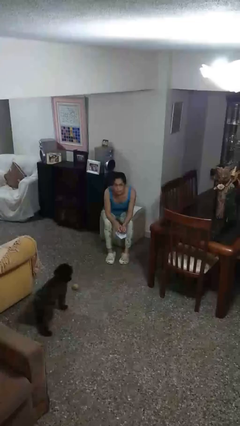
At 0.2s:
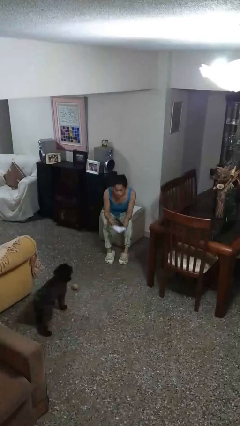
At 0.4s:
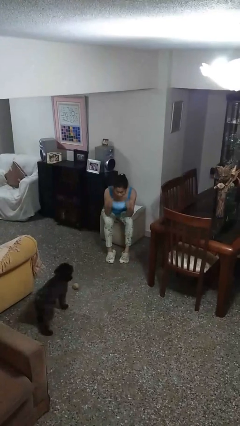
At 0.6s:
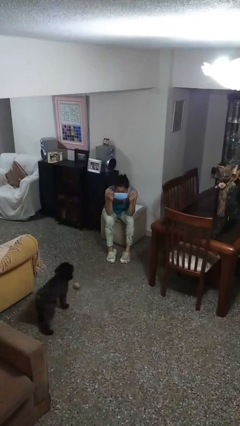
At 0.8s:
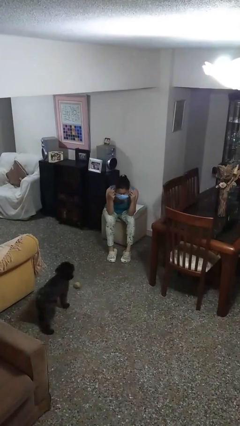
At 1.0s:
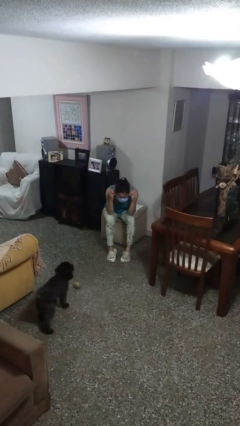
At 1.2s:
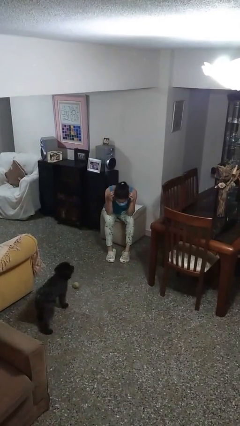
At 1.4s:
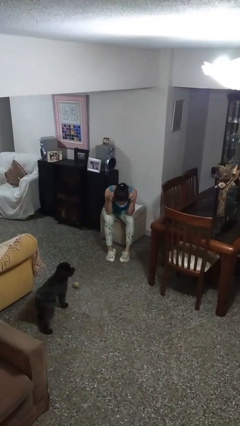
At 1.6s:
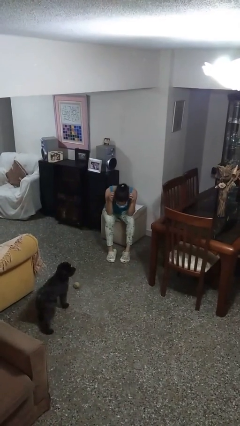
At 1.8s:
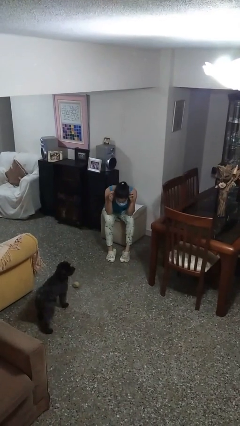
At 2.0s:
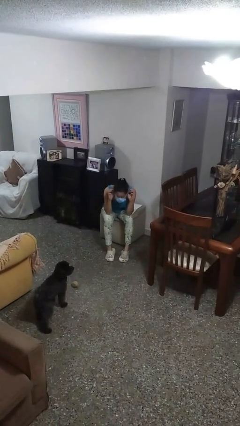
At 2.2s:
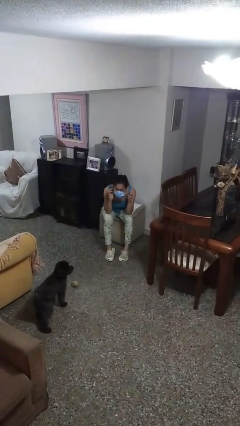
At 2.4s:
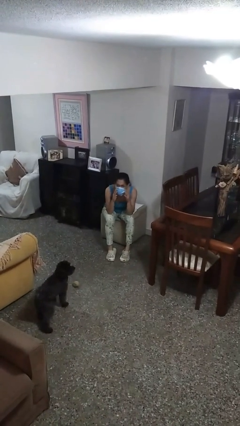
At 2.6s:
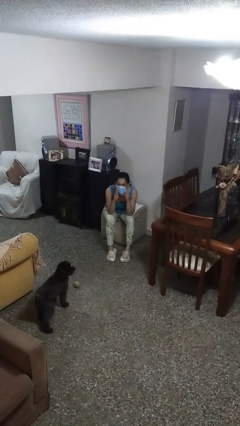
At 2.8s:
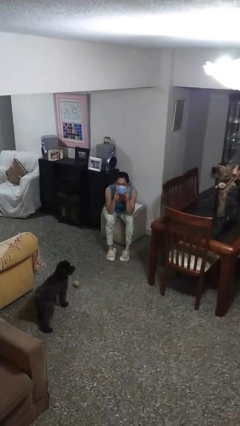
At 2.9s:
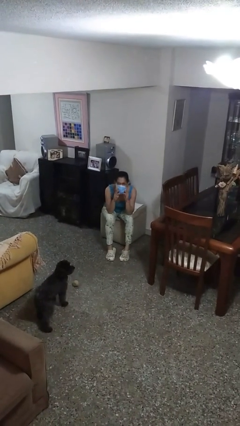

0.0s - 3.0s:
person puts on facemask

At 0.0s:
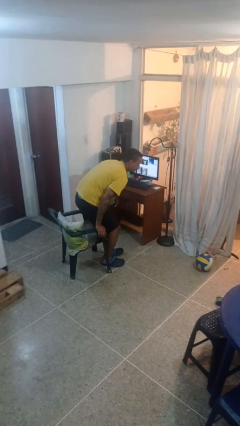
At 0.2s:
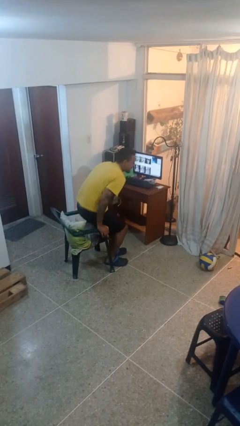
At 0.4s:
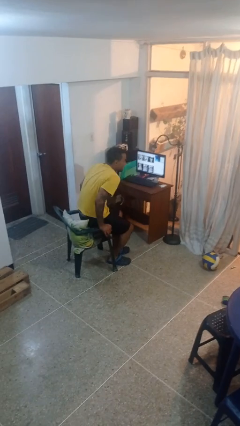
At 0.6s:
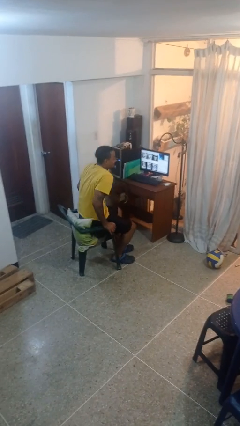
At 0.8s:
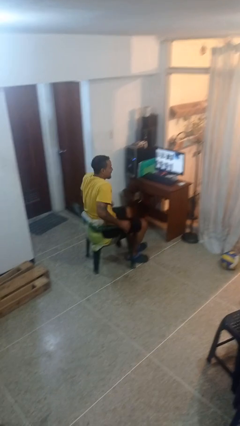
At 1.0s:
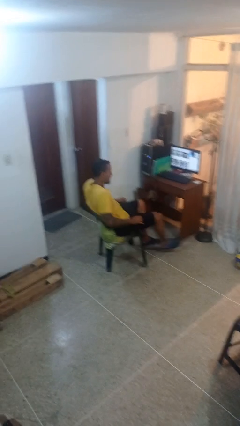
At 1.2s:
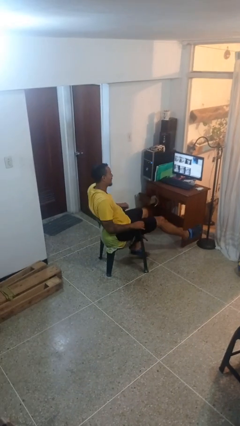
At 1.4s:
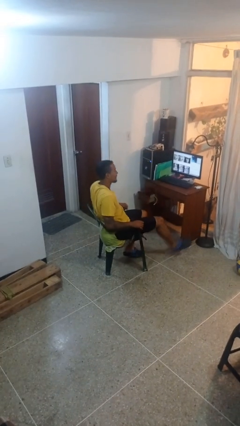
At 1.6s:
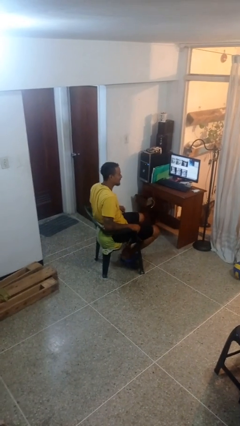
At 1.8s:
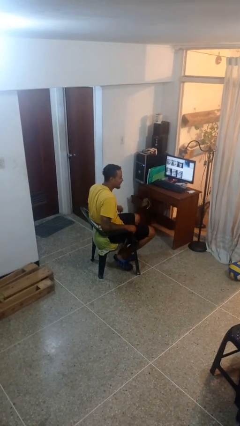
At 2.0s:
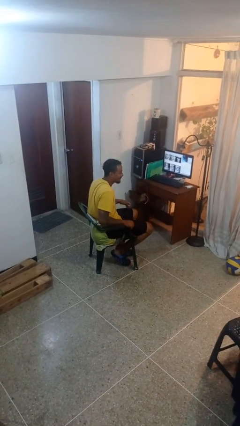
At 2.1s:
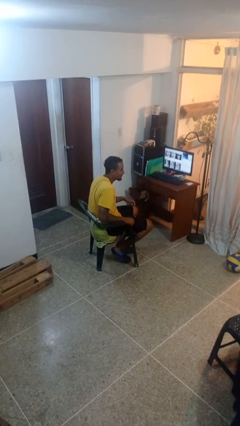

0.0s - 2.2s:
person sits down

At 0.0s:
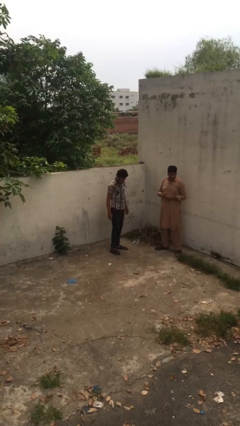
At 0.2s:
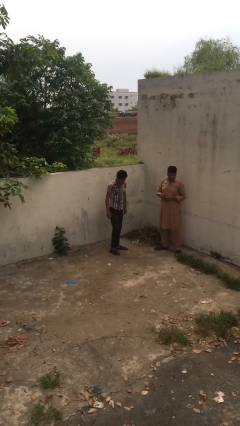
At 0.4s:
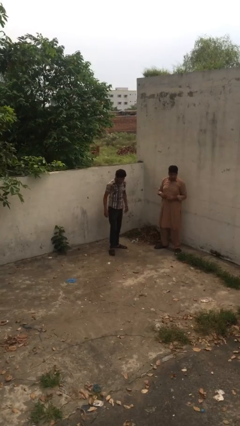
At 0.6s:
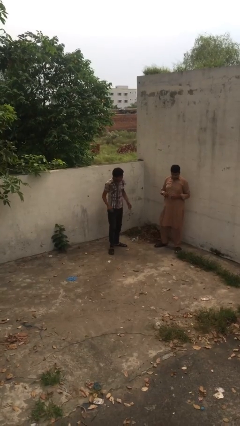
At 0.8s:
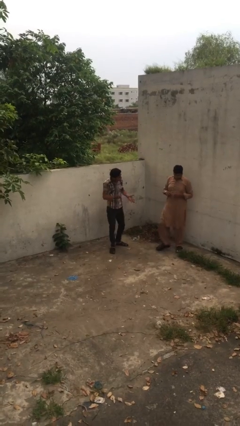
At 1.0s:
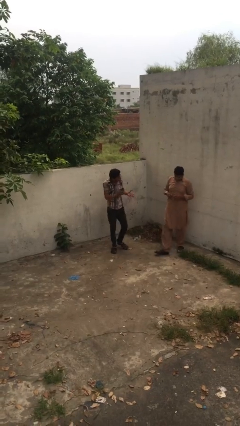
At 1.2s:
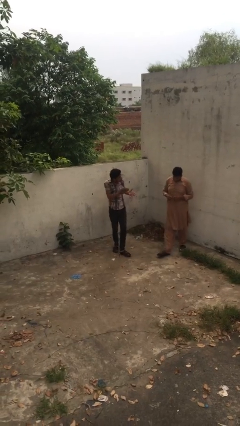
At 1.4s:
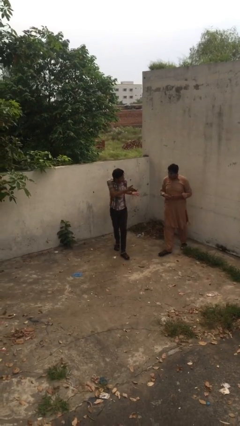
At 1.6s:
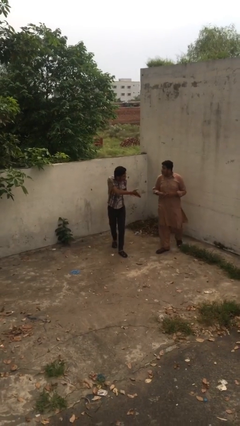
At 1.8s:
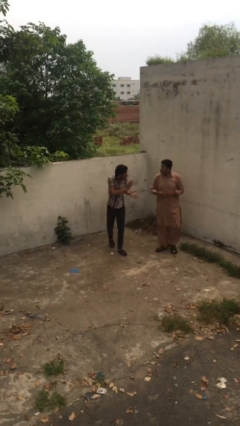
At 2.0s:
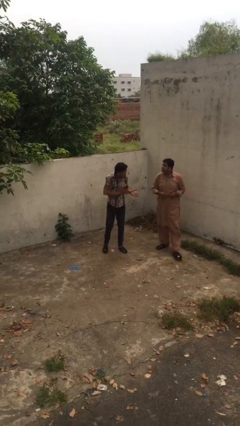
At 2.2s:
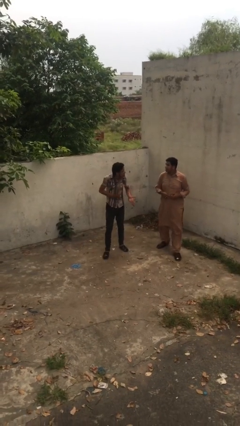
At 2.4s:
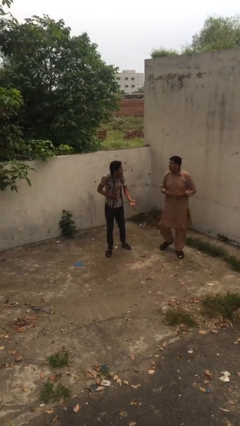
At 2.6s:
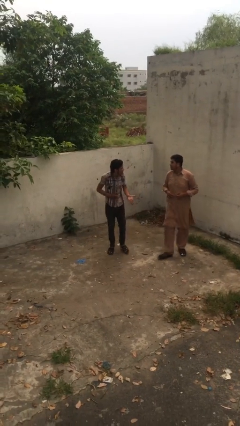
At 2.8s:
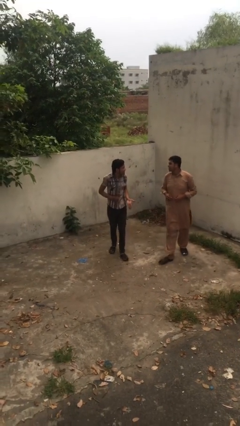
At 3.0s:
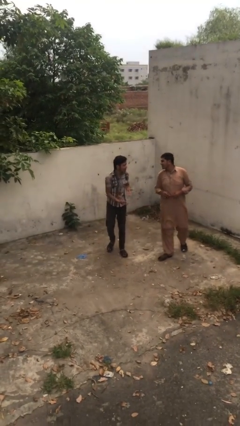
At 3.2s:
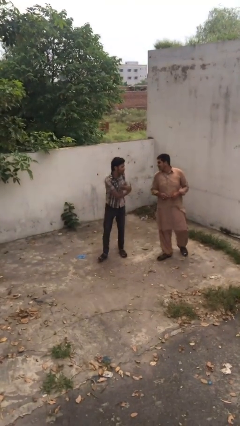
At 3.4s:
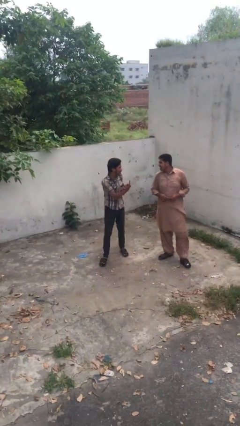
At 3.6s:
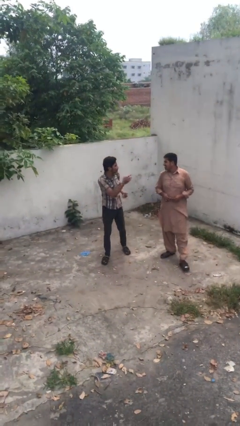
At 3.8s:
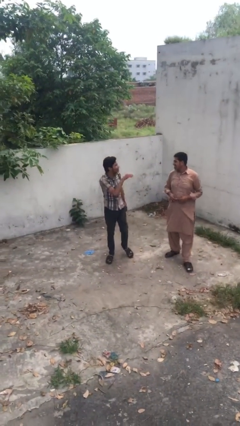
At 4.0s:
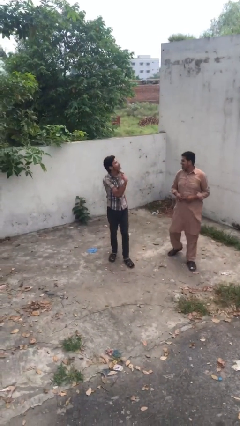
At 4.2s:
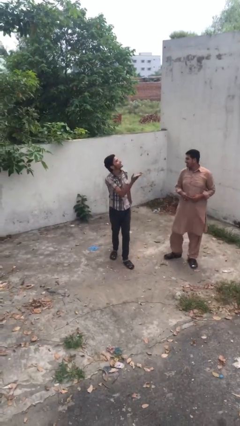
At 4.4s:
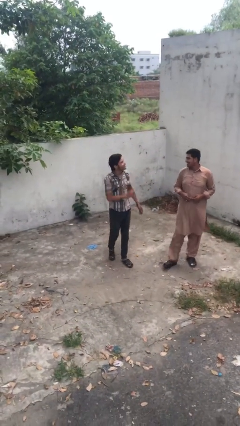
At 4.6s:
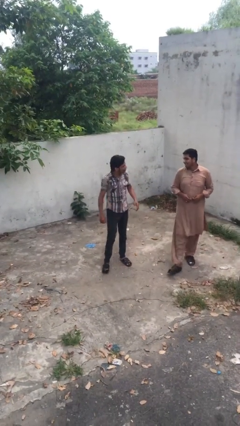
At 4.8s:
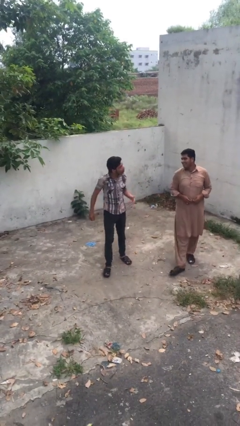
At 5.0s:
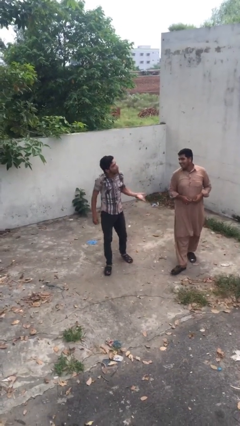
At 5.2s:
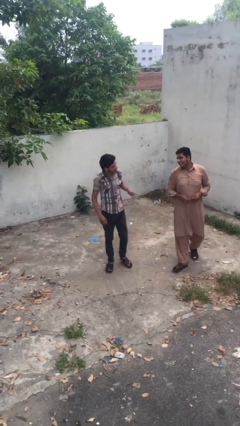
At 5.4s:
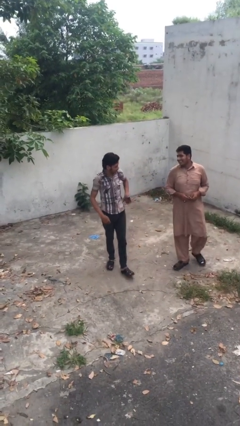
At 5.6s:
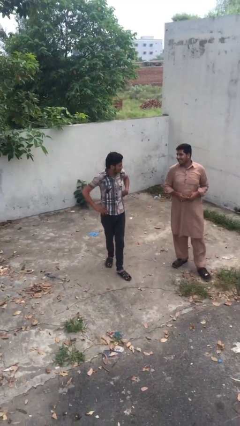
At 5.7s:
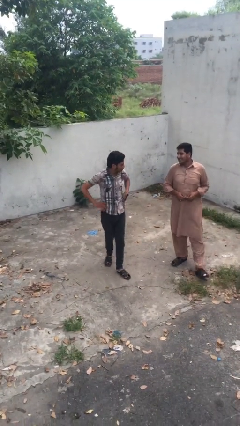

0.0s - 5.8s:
person talks to person

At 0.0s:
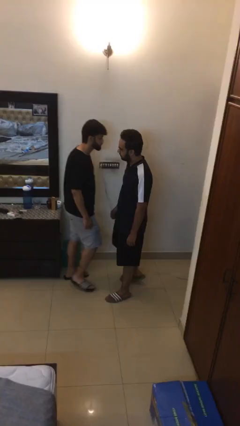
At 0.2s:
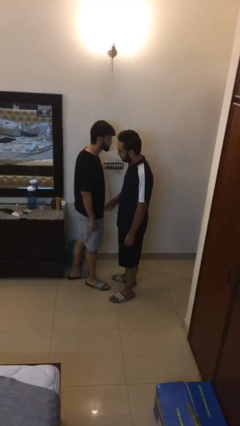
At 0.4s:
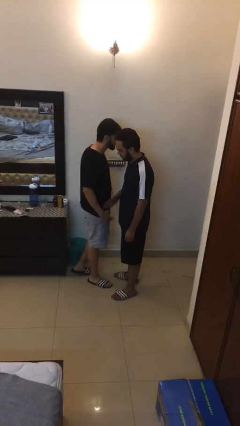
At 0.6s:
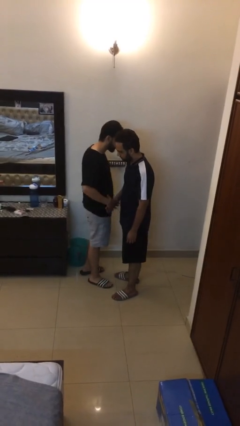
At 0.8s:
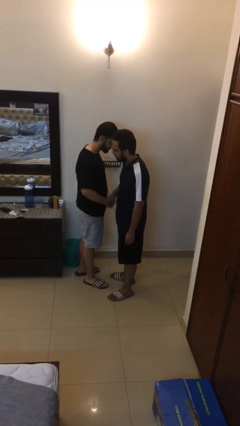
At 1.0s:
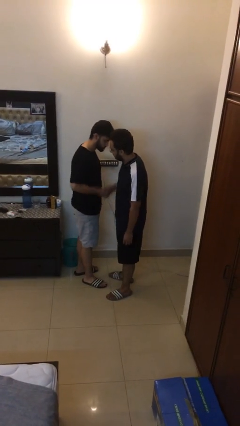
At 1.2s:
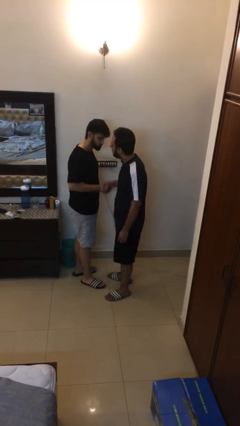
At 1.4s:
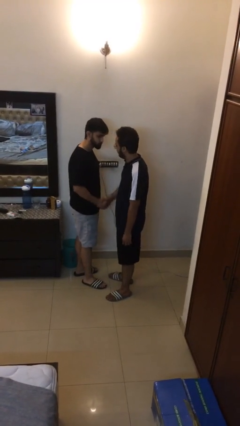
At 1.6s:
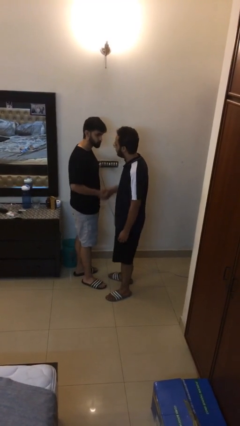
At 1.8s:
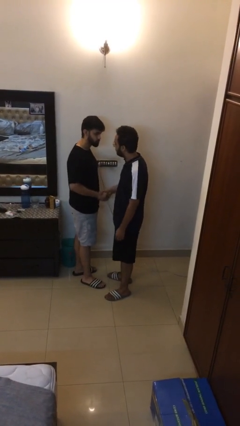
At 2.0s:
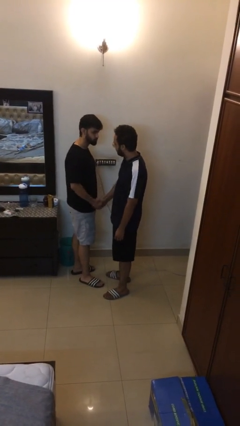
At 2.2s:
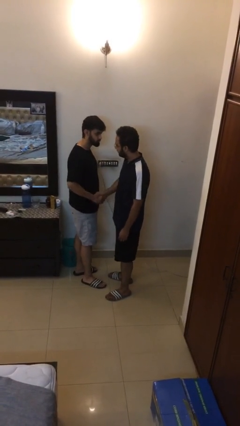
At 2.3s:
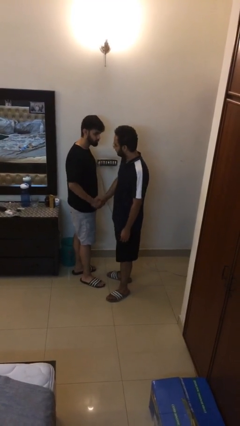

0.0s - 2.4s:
person shakes hand

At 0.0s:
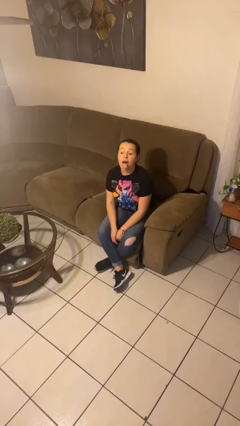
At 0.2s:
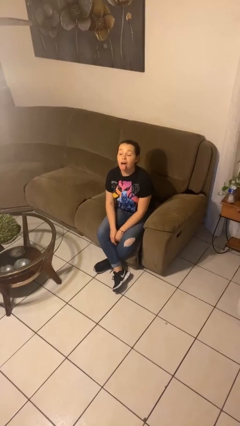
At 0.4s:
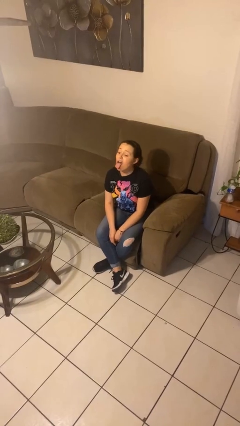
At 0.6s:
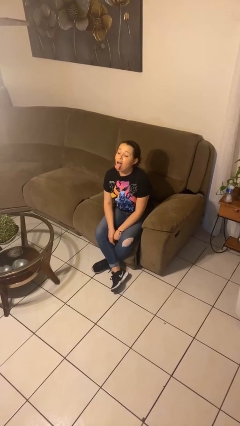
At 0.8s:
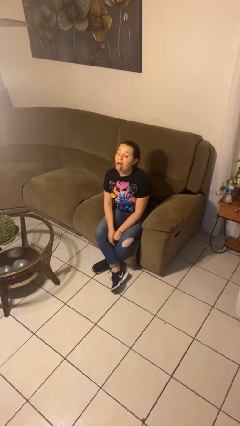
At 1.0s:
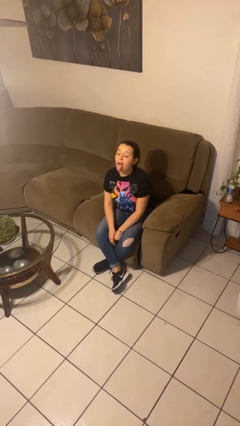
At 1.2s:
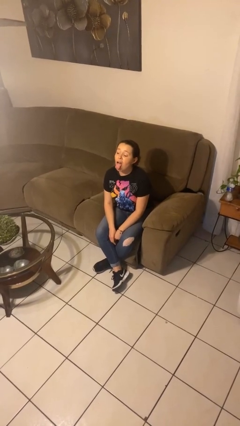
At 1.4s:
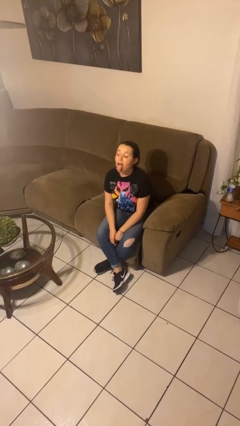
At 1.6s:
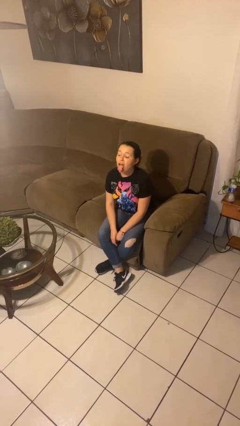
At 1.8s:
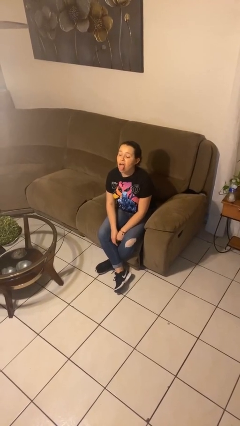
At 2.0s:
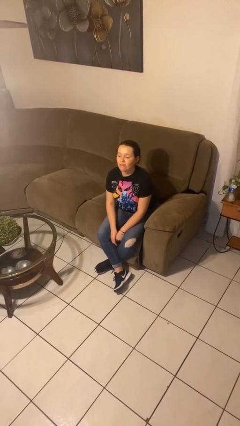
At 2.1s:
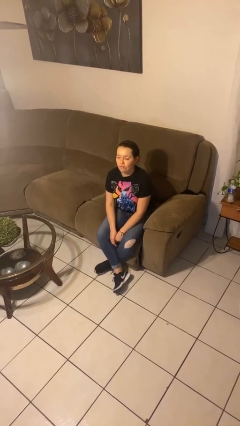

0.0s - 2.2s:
person sticks out tongue

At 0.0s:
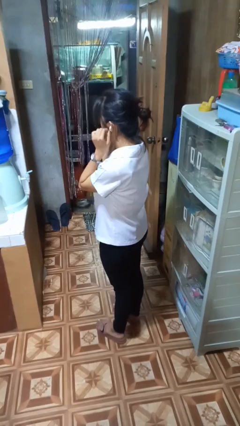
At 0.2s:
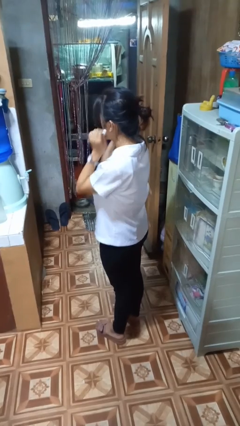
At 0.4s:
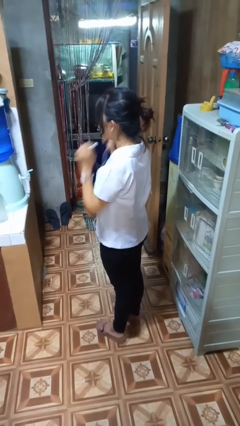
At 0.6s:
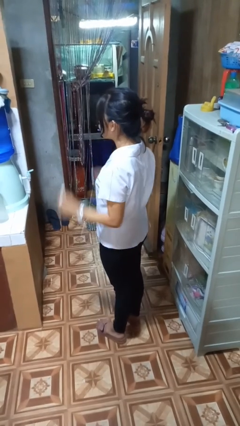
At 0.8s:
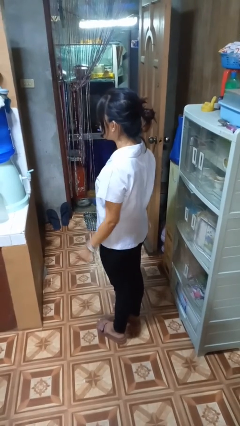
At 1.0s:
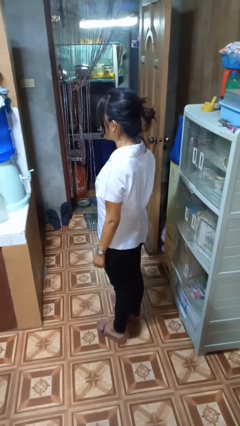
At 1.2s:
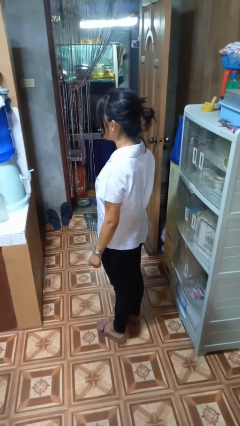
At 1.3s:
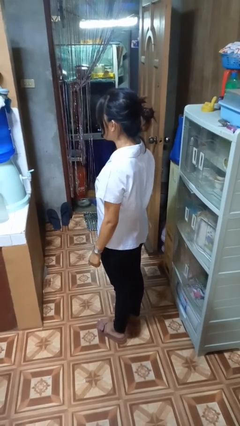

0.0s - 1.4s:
person takes off headphones

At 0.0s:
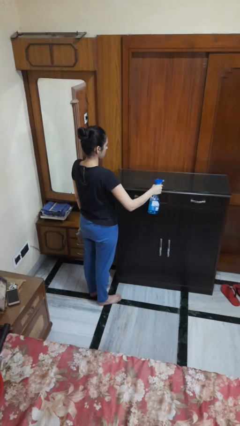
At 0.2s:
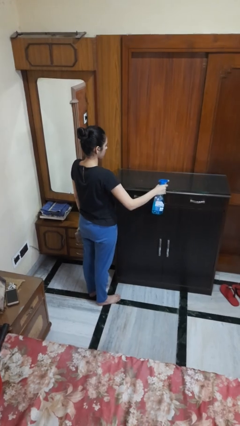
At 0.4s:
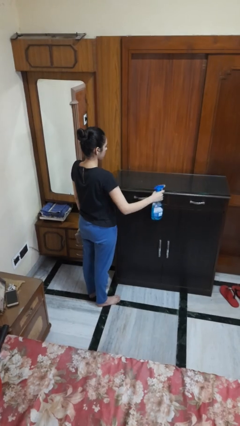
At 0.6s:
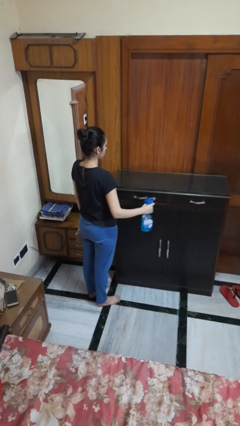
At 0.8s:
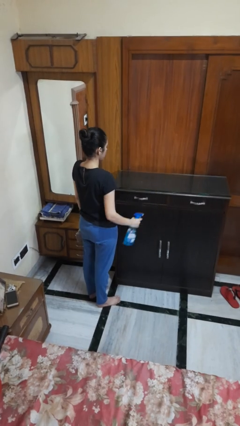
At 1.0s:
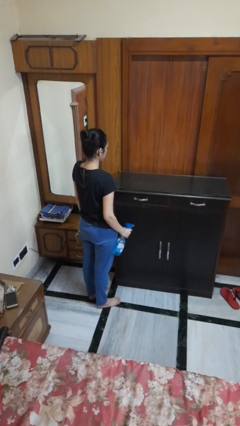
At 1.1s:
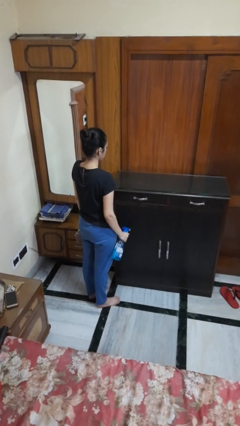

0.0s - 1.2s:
person sprays from bottle
